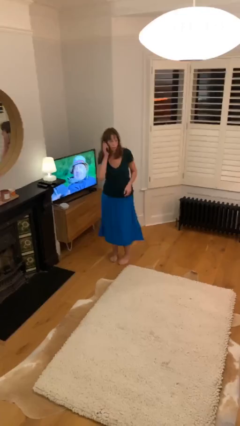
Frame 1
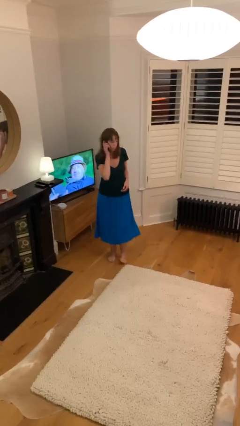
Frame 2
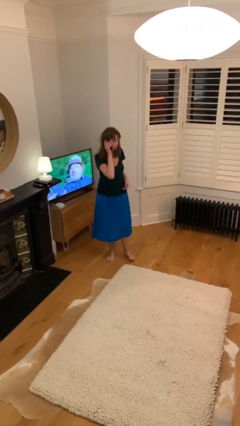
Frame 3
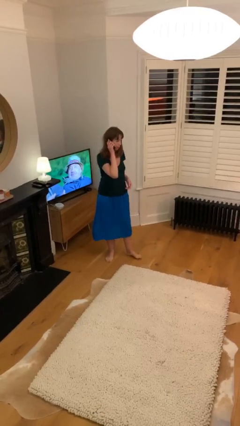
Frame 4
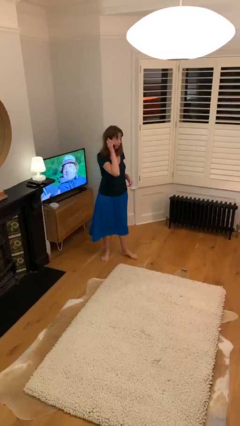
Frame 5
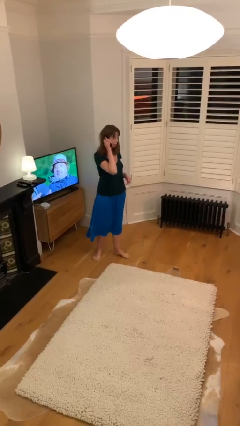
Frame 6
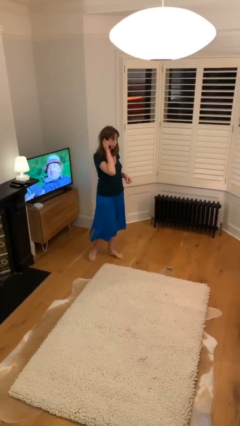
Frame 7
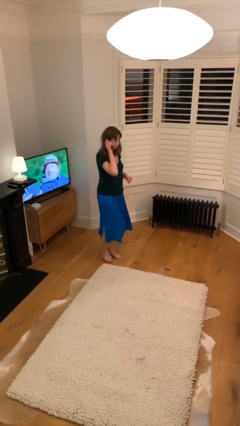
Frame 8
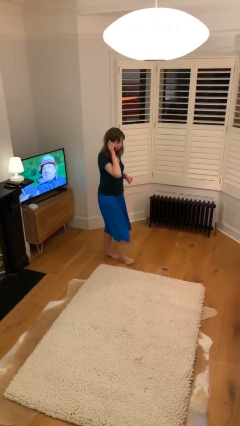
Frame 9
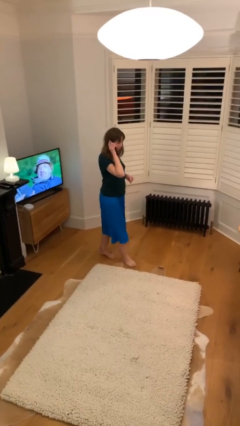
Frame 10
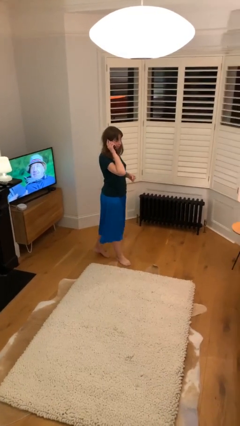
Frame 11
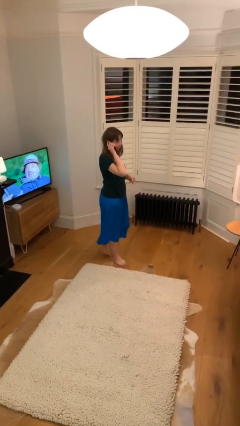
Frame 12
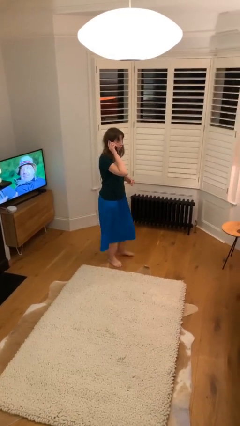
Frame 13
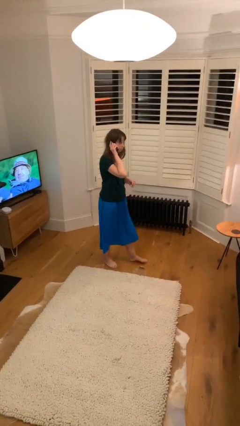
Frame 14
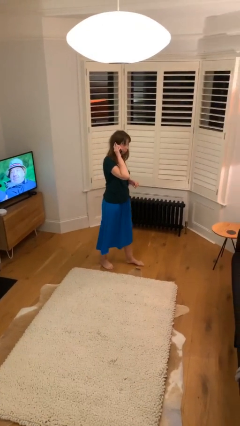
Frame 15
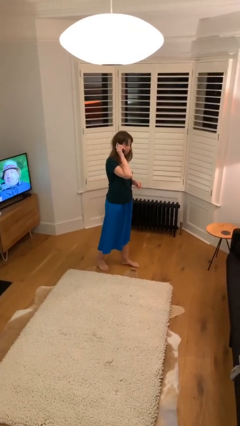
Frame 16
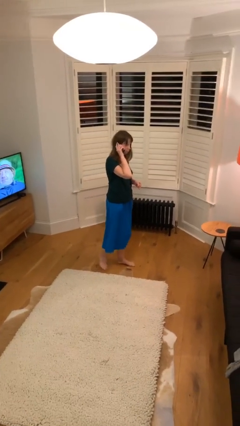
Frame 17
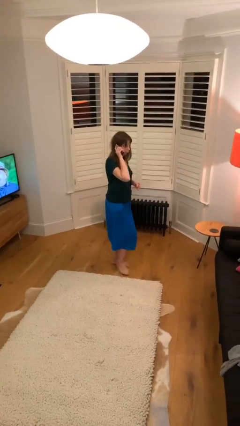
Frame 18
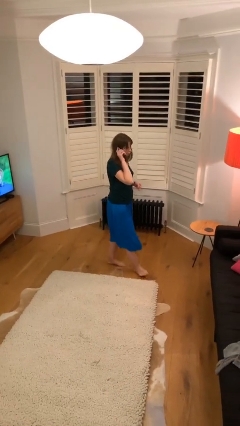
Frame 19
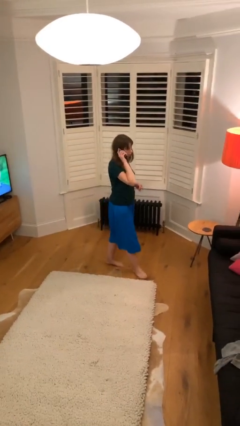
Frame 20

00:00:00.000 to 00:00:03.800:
person talks on phone

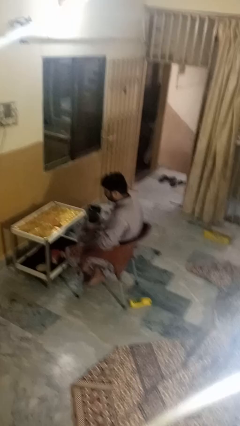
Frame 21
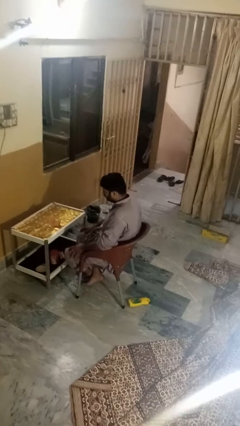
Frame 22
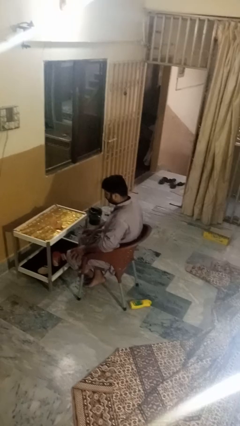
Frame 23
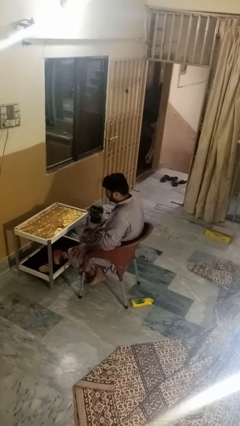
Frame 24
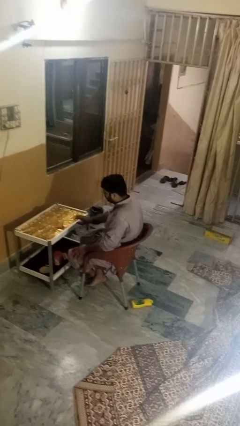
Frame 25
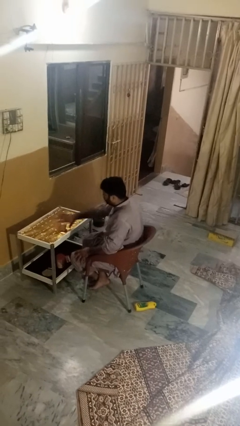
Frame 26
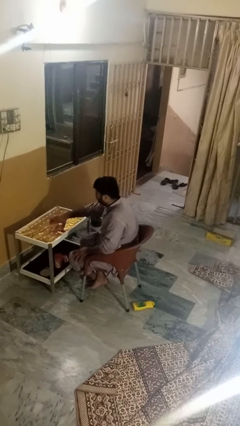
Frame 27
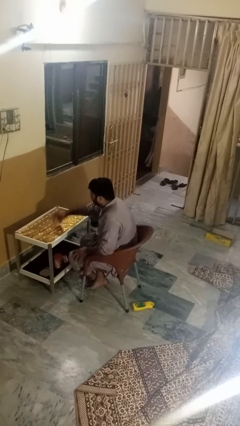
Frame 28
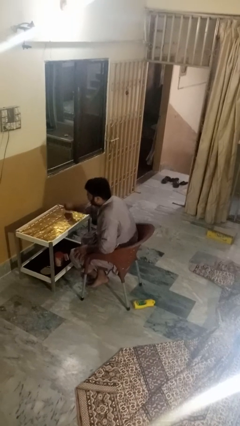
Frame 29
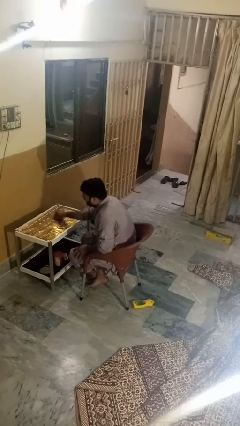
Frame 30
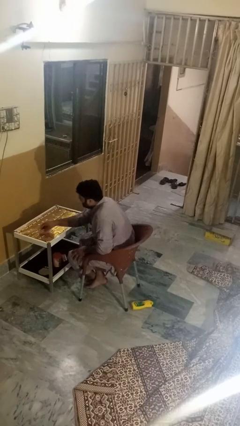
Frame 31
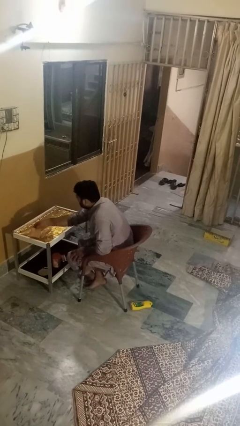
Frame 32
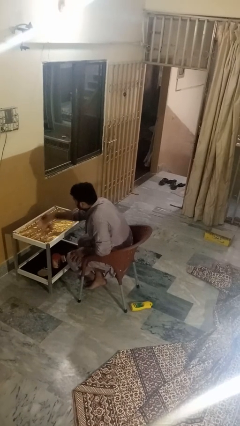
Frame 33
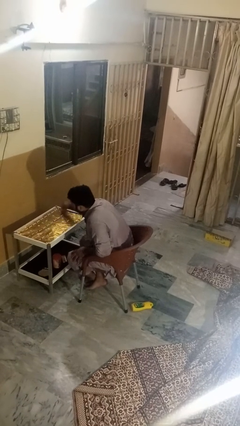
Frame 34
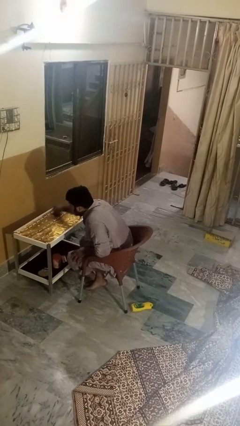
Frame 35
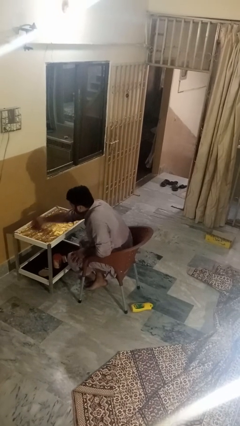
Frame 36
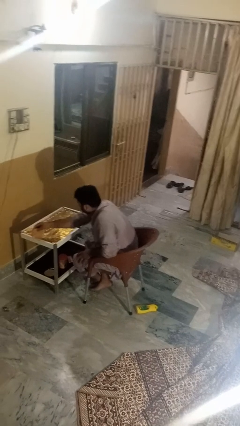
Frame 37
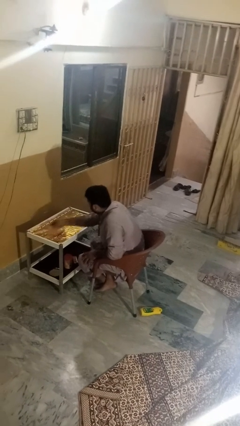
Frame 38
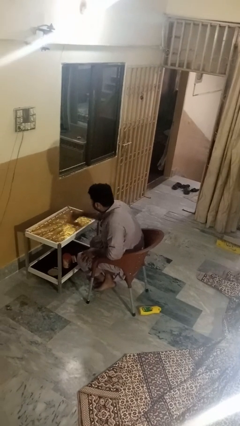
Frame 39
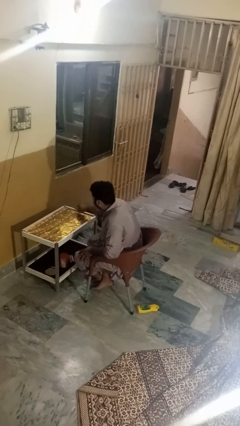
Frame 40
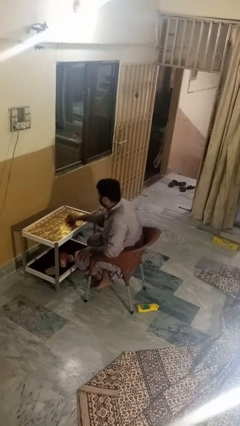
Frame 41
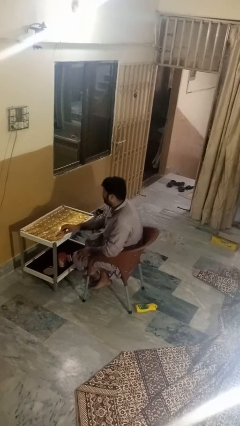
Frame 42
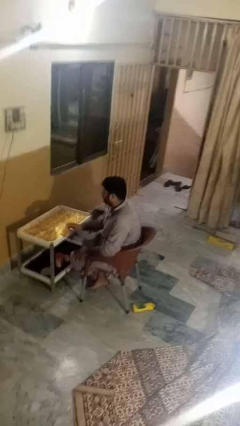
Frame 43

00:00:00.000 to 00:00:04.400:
person cleans table with rag

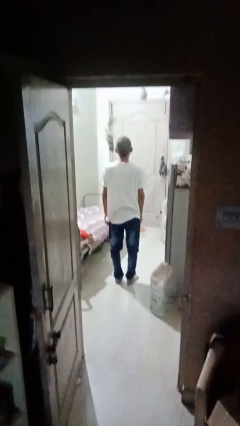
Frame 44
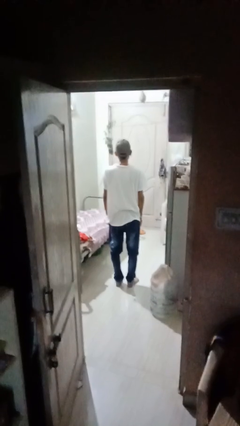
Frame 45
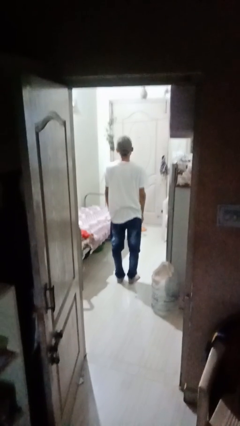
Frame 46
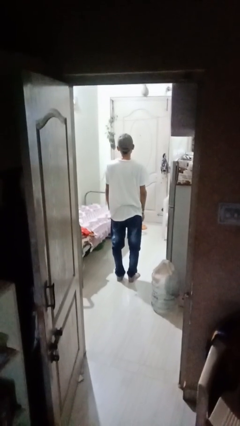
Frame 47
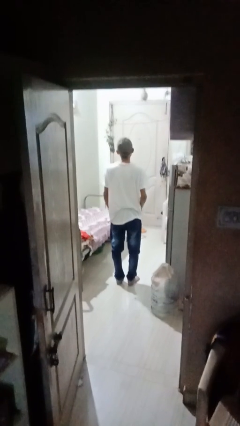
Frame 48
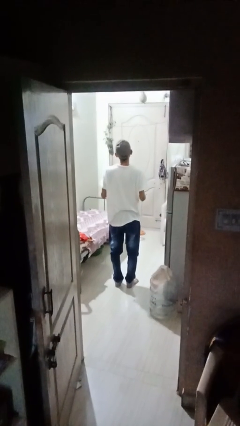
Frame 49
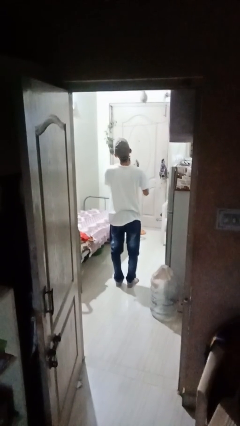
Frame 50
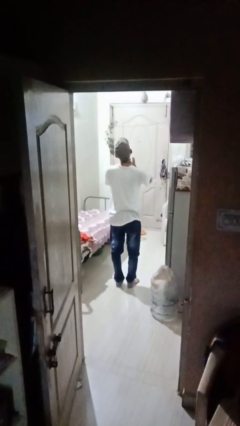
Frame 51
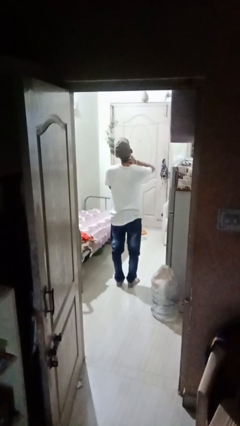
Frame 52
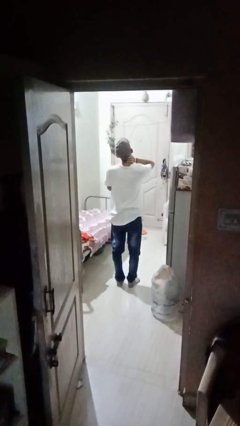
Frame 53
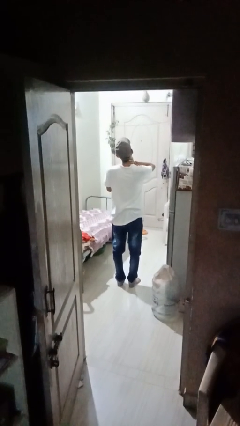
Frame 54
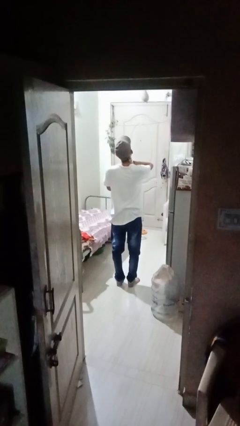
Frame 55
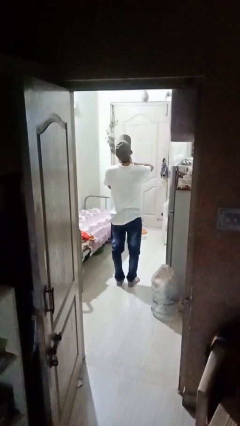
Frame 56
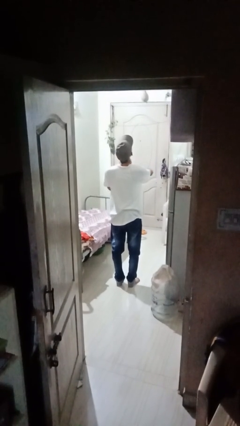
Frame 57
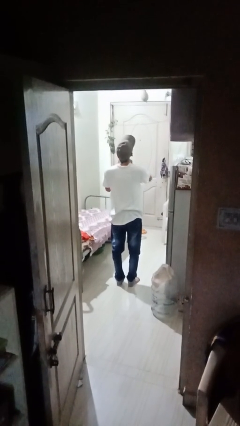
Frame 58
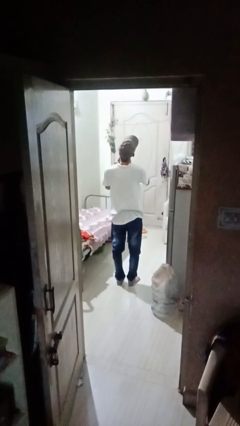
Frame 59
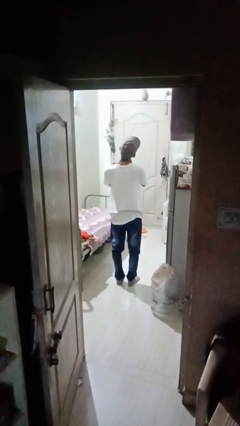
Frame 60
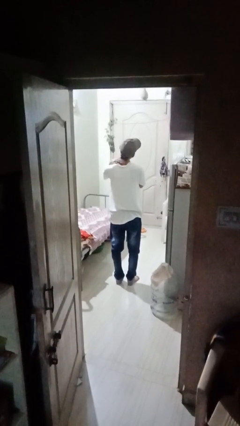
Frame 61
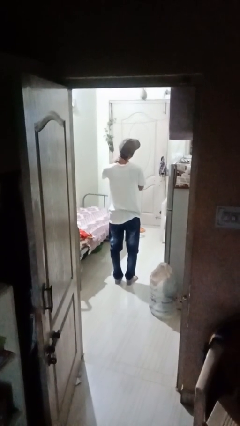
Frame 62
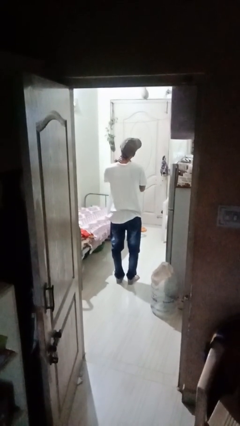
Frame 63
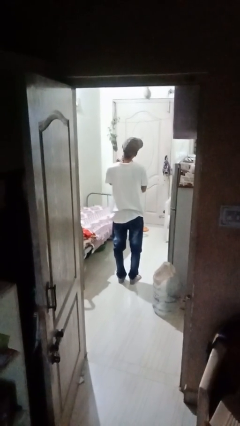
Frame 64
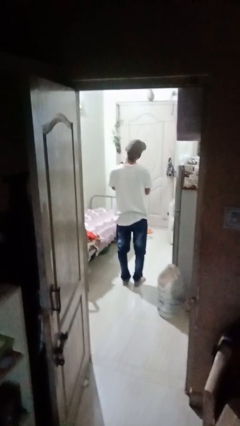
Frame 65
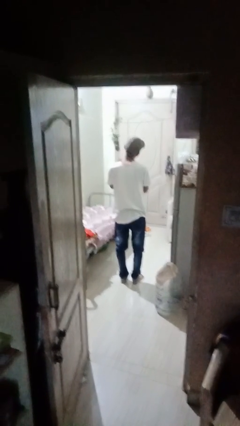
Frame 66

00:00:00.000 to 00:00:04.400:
person rubs neck

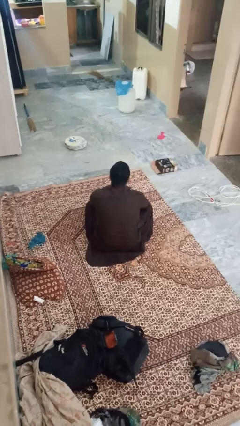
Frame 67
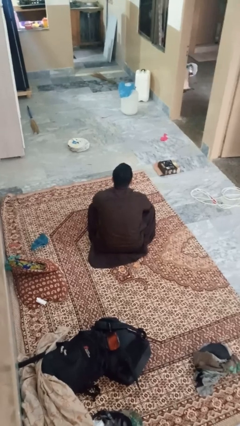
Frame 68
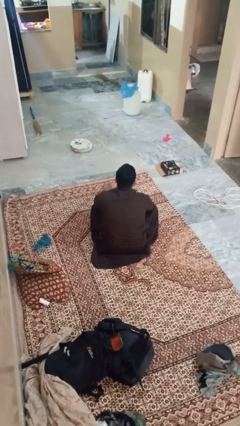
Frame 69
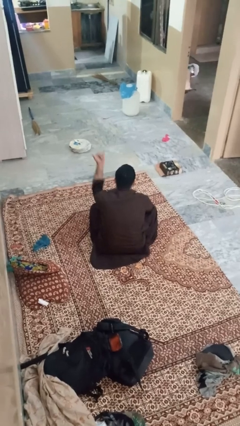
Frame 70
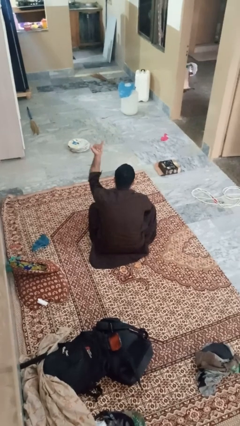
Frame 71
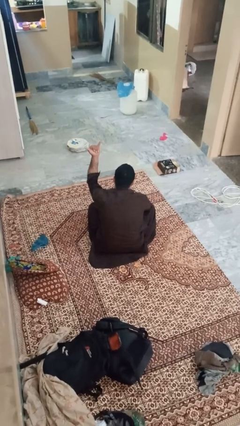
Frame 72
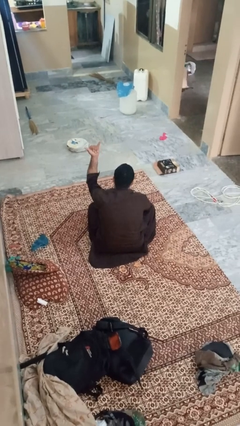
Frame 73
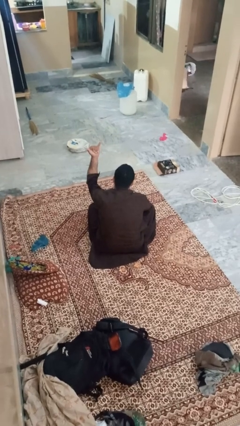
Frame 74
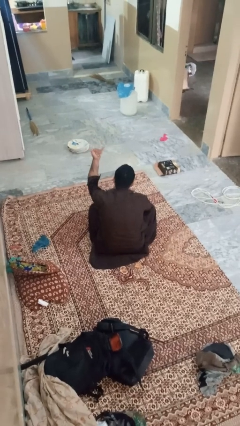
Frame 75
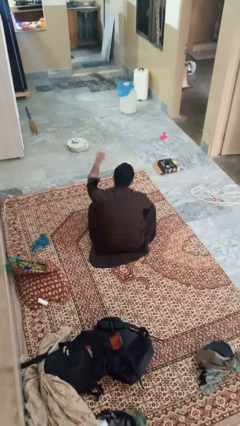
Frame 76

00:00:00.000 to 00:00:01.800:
person gestures hang loose

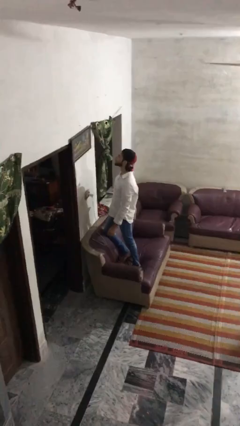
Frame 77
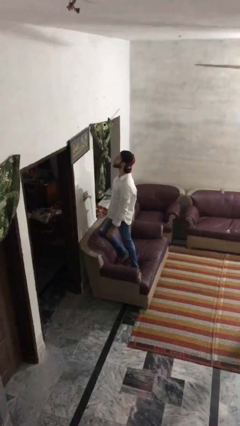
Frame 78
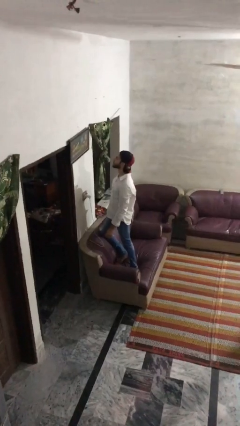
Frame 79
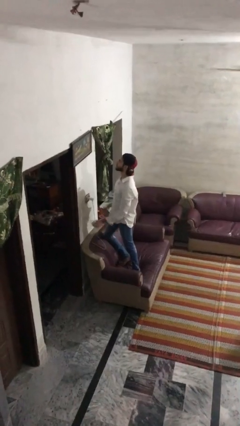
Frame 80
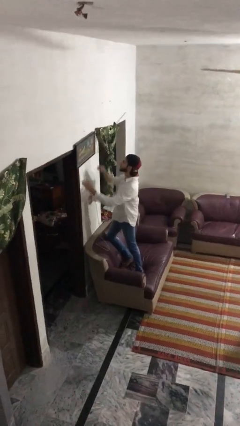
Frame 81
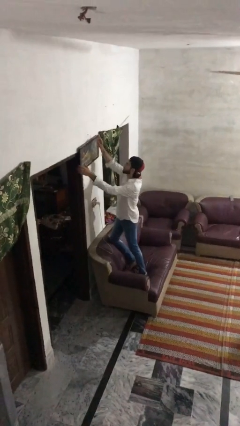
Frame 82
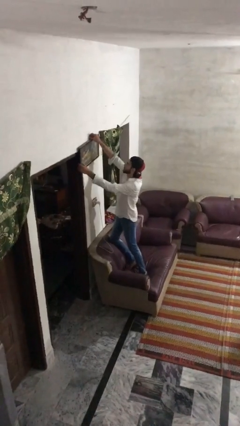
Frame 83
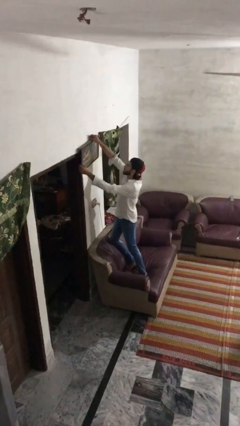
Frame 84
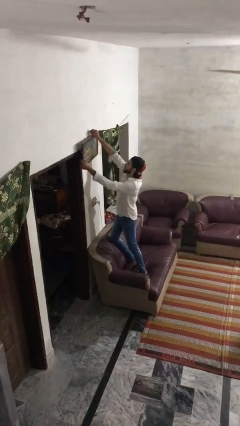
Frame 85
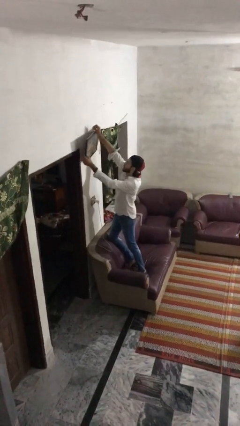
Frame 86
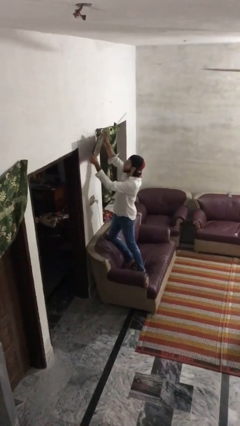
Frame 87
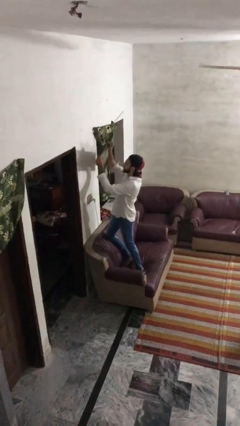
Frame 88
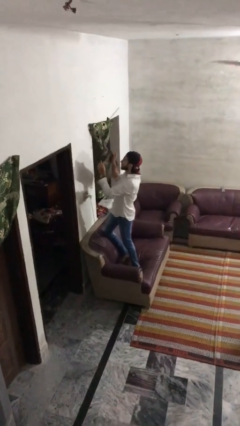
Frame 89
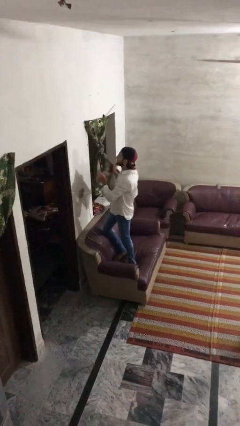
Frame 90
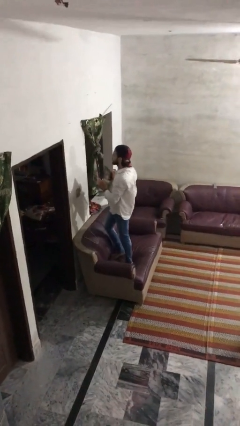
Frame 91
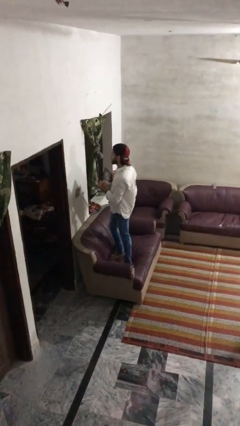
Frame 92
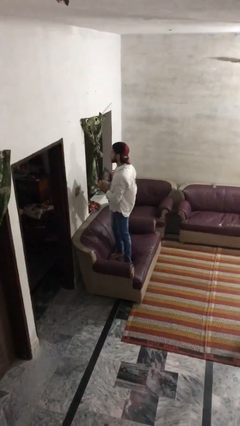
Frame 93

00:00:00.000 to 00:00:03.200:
person takes down picture frame
